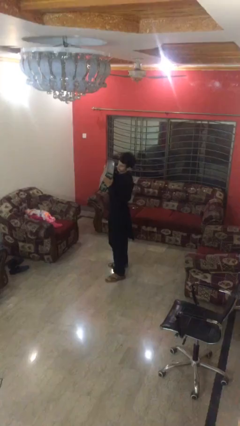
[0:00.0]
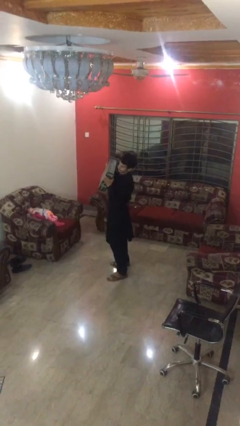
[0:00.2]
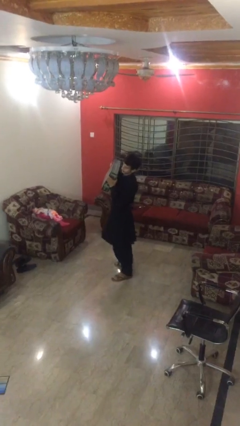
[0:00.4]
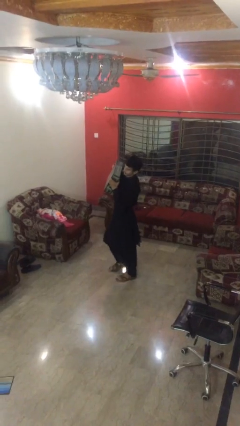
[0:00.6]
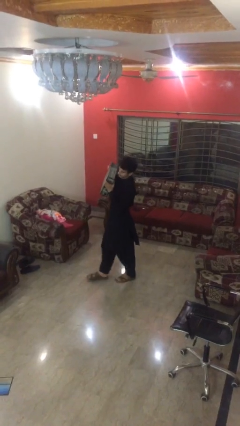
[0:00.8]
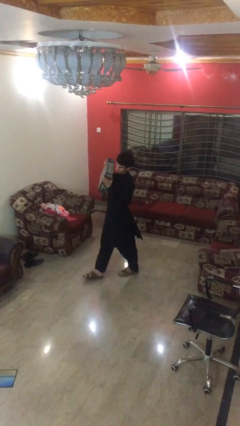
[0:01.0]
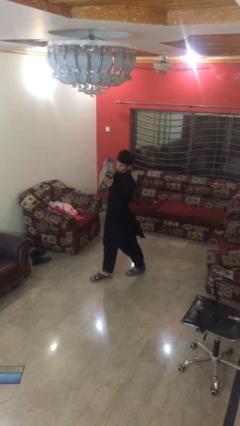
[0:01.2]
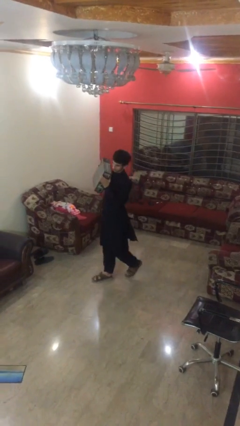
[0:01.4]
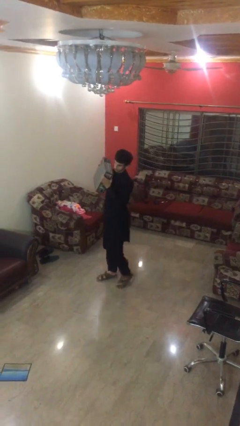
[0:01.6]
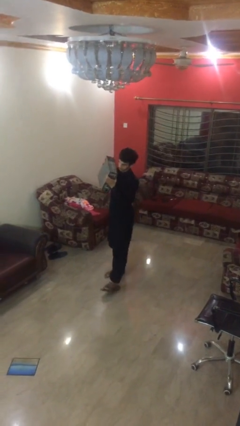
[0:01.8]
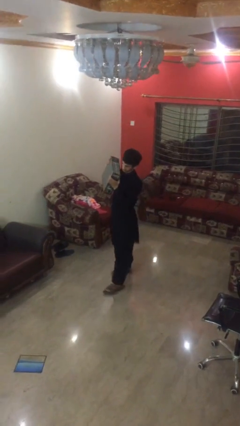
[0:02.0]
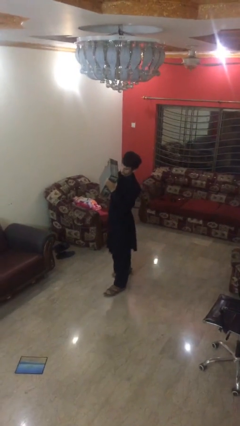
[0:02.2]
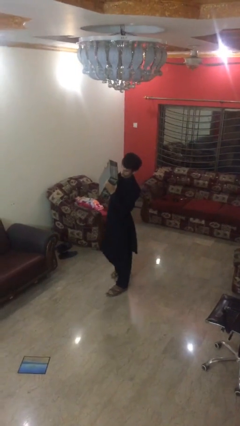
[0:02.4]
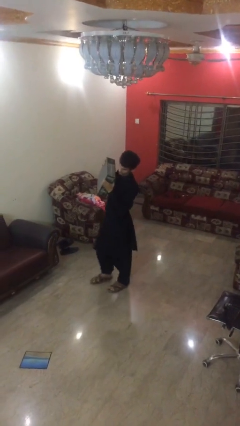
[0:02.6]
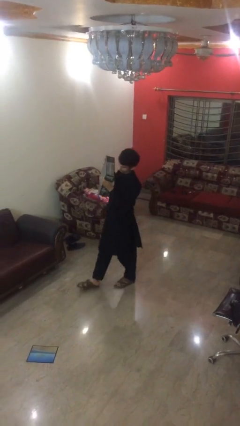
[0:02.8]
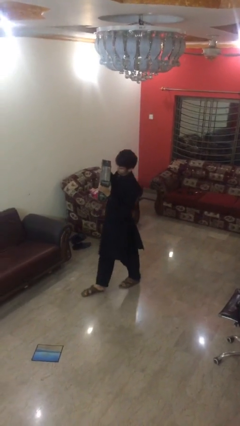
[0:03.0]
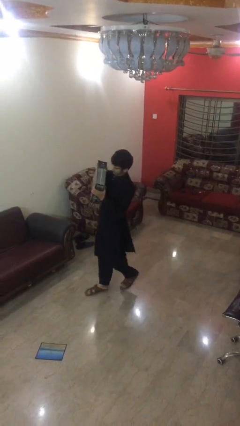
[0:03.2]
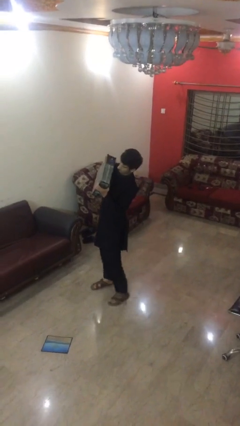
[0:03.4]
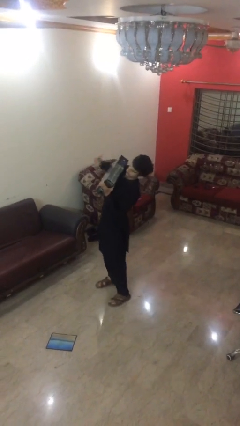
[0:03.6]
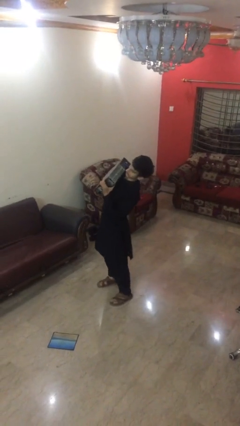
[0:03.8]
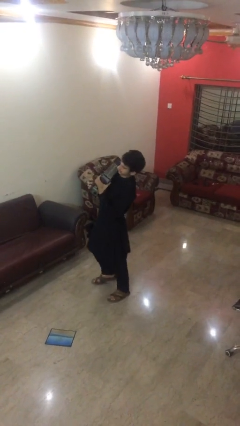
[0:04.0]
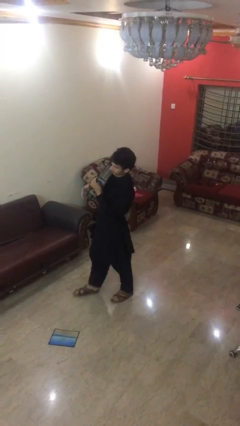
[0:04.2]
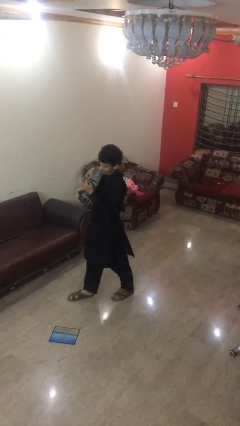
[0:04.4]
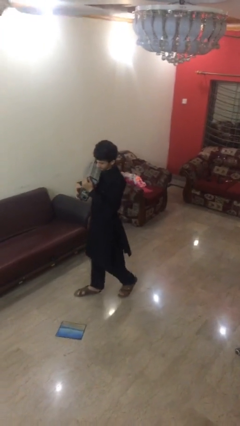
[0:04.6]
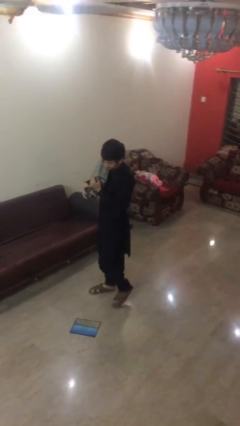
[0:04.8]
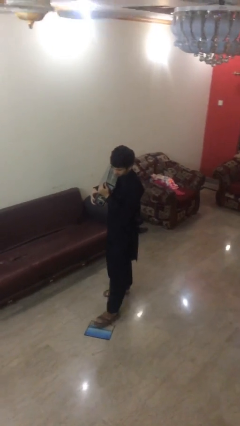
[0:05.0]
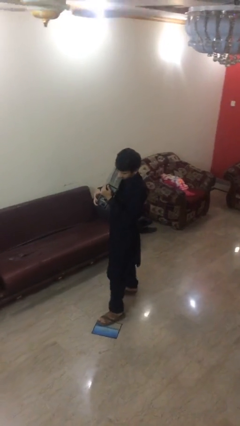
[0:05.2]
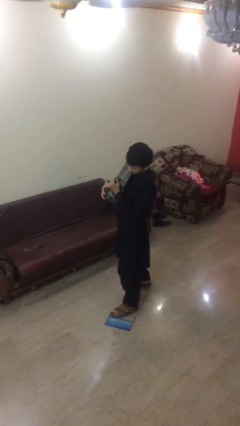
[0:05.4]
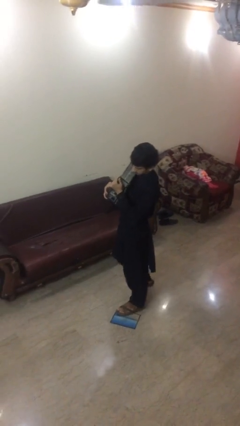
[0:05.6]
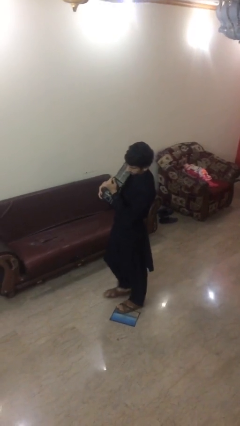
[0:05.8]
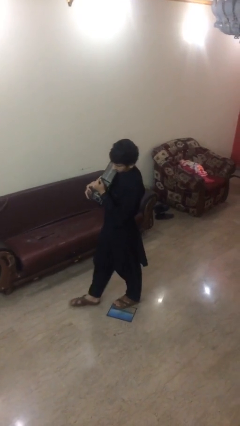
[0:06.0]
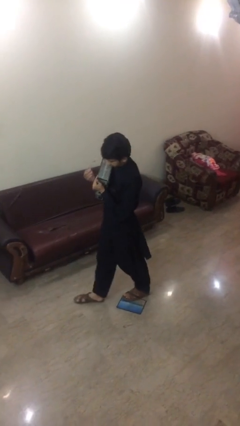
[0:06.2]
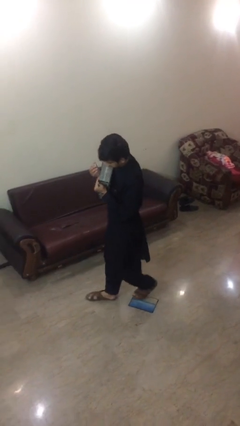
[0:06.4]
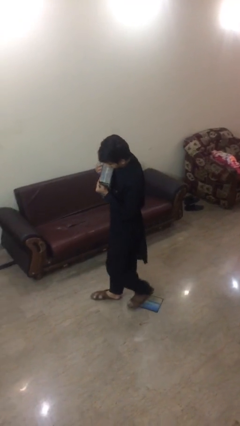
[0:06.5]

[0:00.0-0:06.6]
person carries heavy object

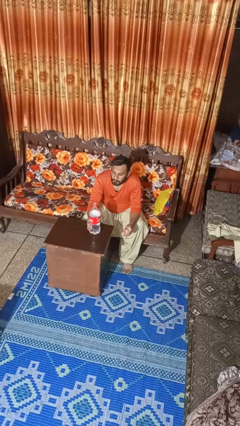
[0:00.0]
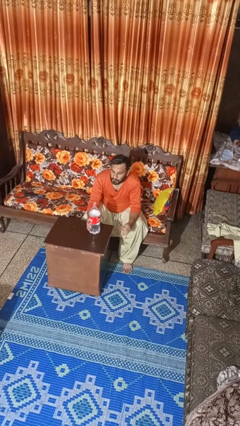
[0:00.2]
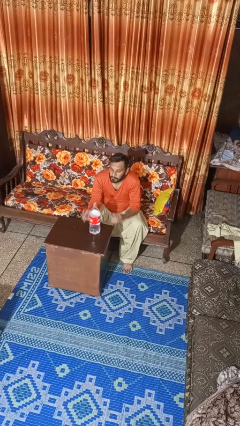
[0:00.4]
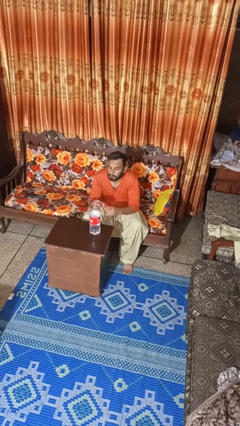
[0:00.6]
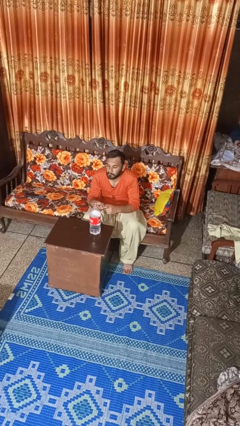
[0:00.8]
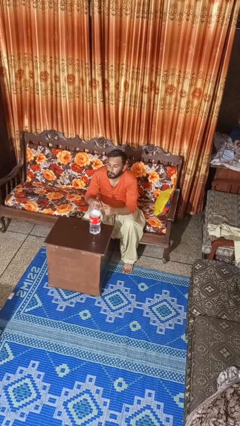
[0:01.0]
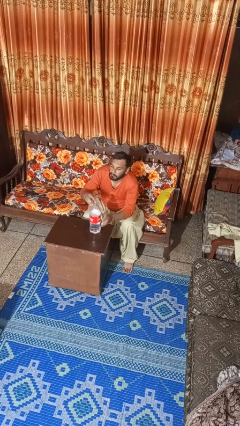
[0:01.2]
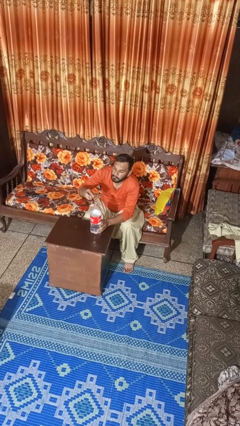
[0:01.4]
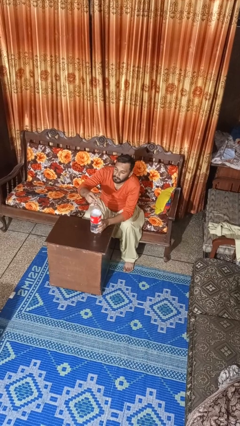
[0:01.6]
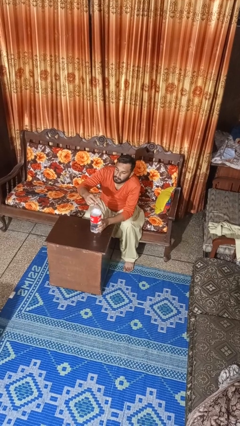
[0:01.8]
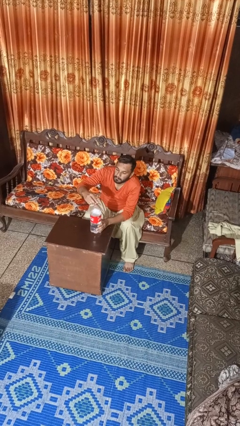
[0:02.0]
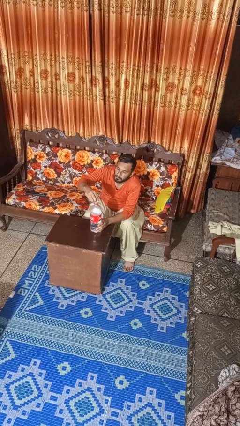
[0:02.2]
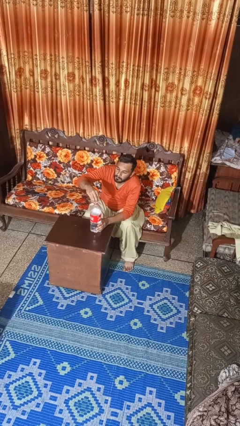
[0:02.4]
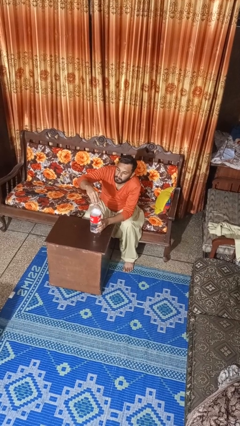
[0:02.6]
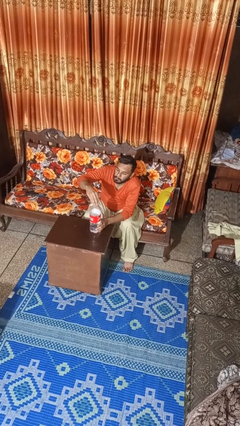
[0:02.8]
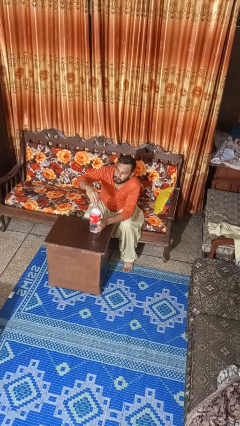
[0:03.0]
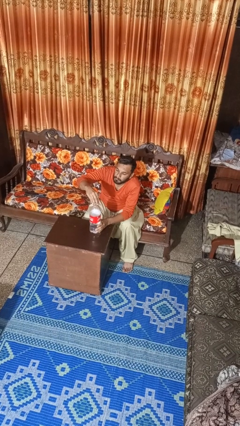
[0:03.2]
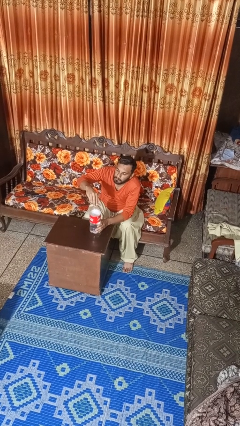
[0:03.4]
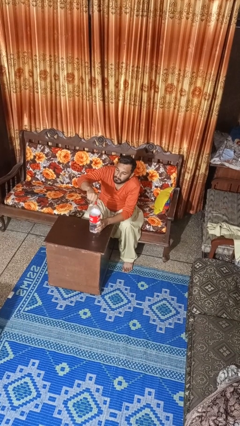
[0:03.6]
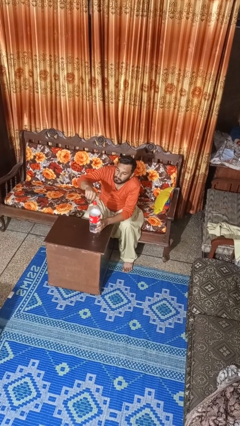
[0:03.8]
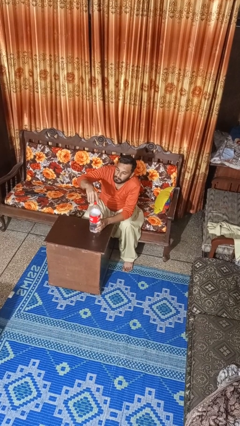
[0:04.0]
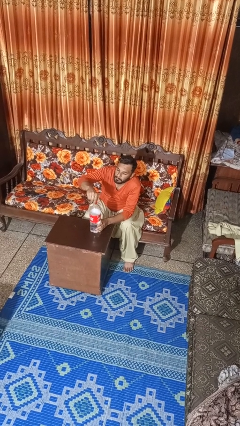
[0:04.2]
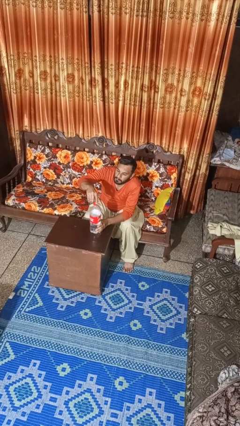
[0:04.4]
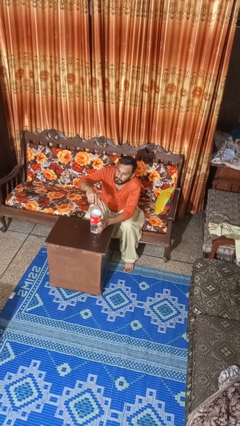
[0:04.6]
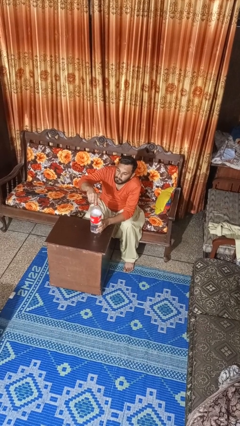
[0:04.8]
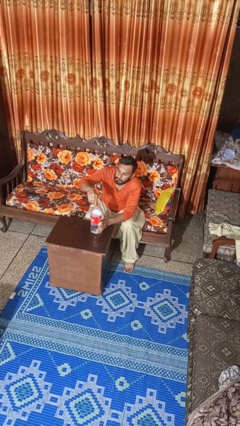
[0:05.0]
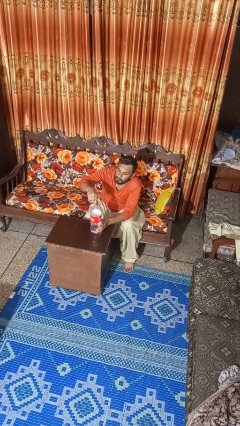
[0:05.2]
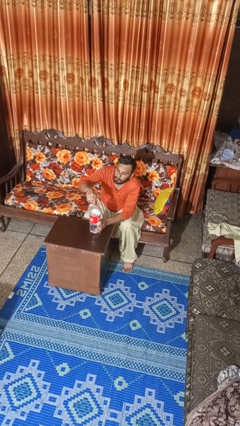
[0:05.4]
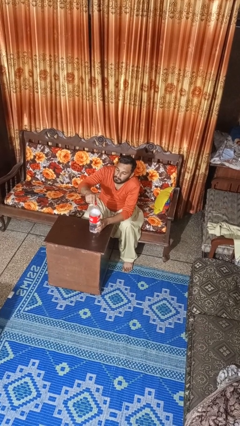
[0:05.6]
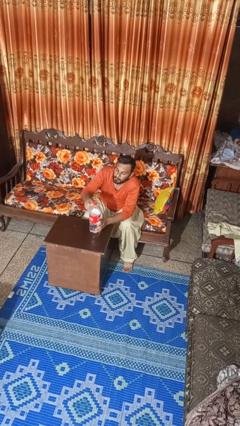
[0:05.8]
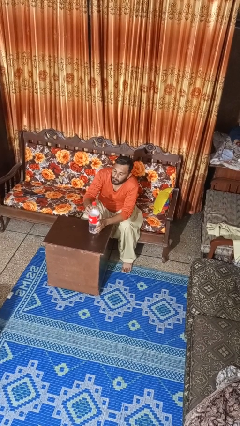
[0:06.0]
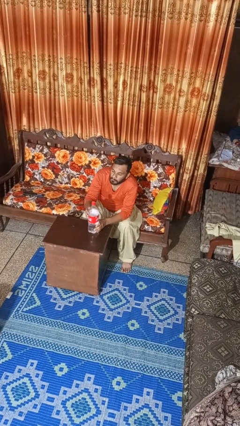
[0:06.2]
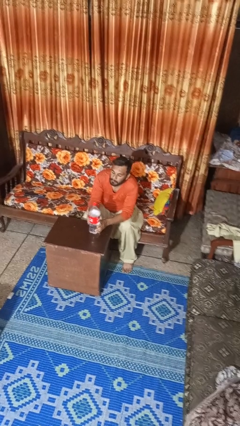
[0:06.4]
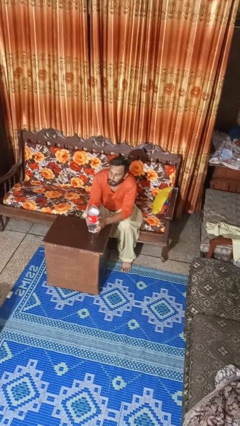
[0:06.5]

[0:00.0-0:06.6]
person screws lid to bottle

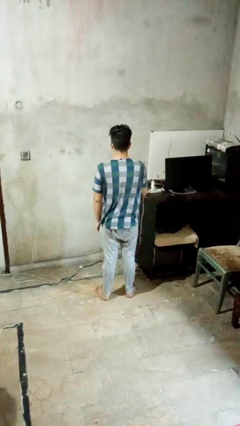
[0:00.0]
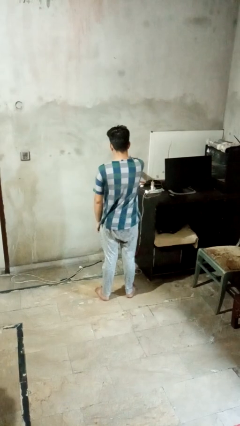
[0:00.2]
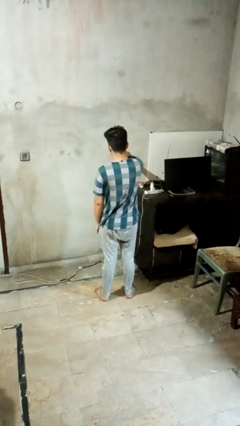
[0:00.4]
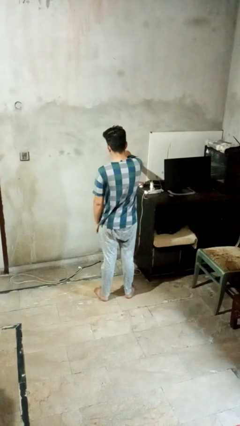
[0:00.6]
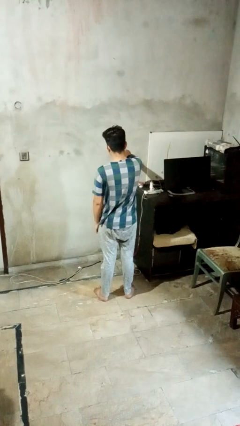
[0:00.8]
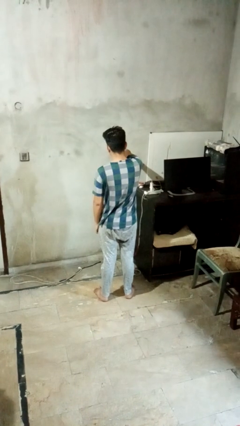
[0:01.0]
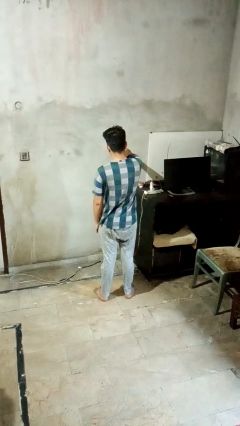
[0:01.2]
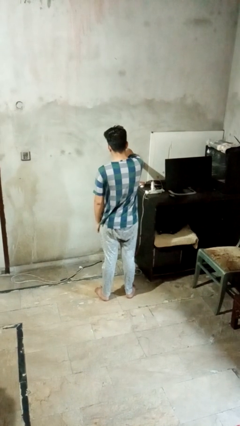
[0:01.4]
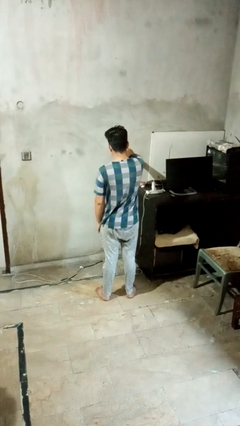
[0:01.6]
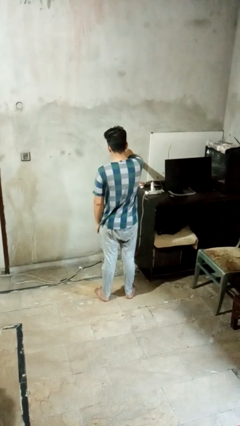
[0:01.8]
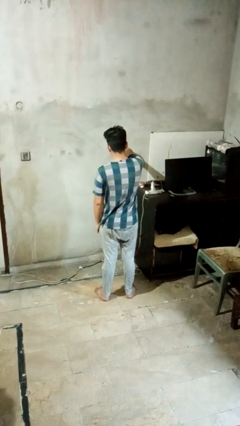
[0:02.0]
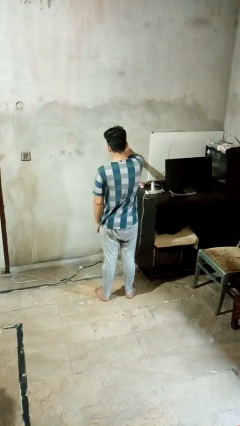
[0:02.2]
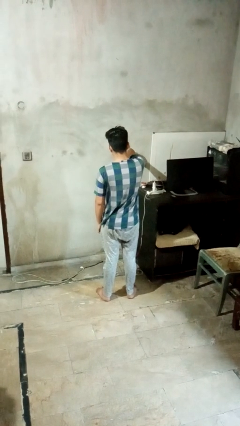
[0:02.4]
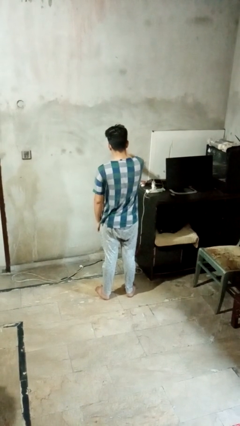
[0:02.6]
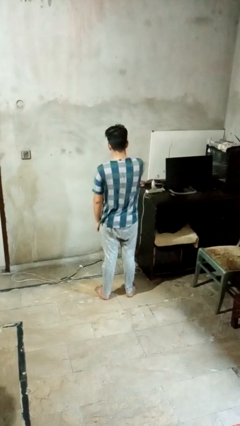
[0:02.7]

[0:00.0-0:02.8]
person punches

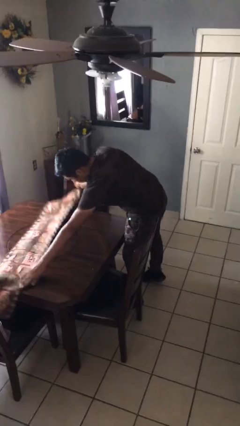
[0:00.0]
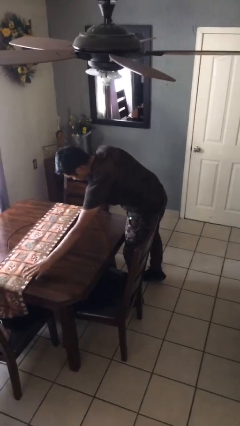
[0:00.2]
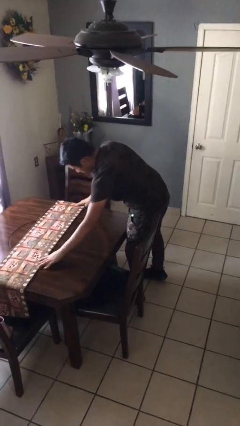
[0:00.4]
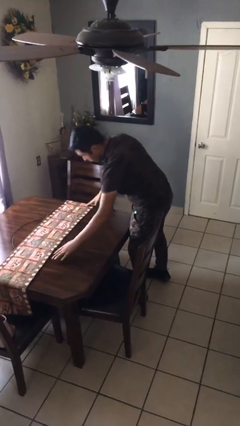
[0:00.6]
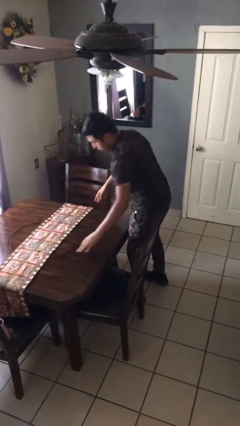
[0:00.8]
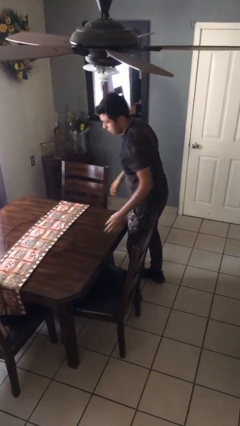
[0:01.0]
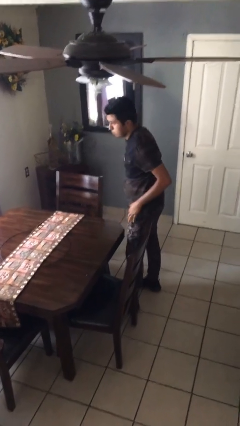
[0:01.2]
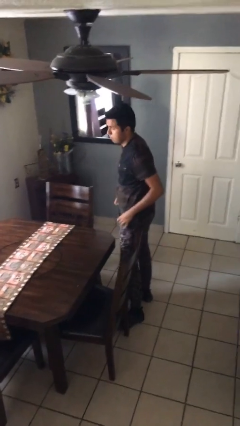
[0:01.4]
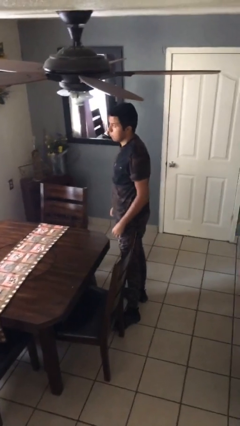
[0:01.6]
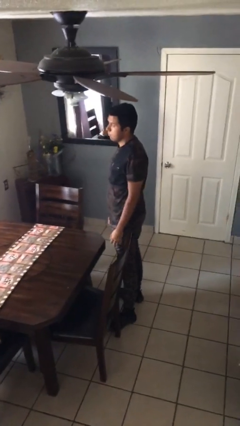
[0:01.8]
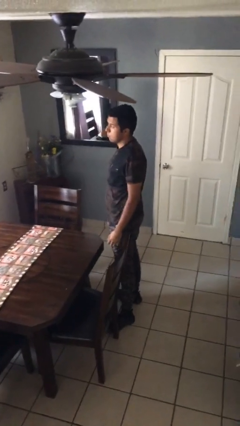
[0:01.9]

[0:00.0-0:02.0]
person spreads tablecloth

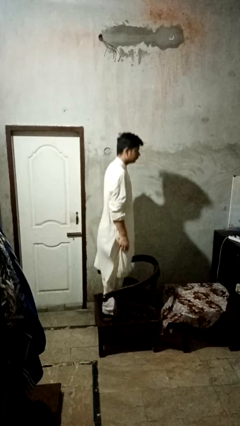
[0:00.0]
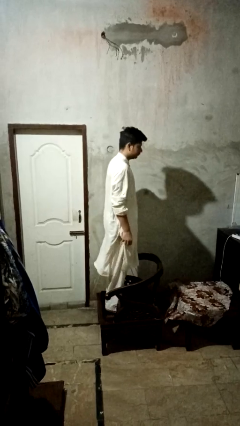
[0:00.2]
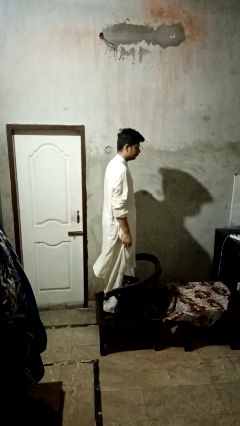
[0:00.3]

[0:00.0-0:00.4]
person jumps on couch
